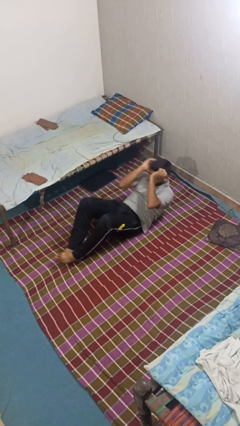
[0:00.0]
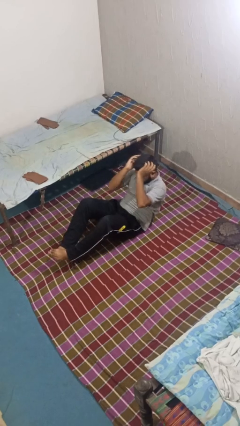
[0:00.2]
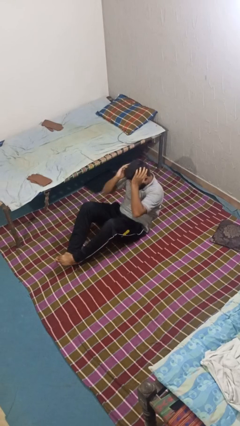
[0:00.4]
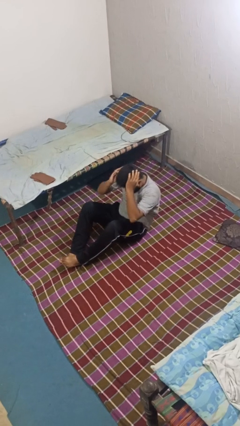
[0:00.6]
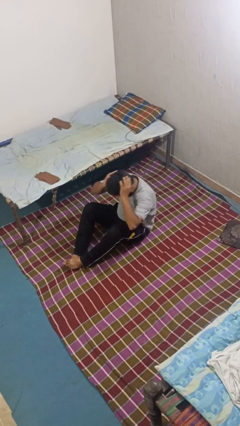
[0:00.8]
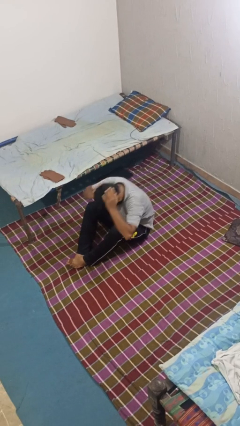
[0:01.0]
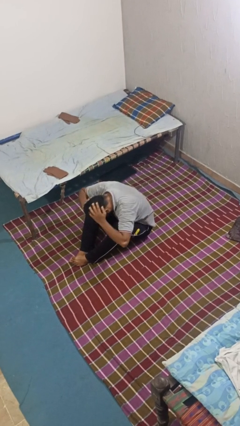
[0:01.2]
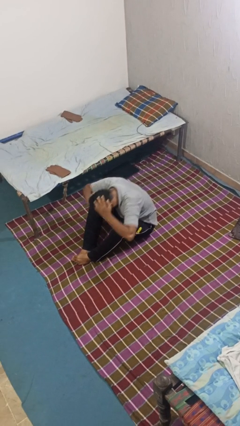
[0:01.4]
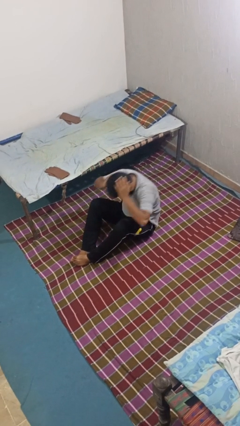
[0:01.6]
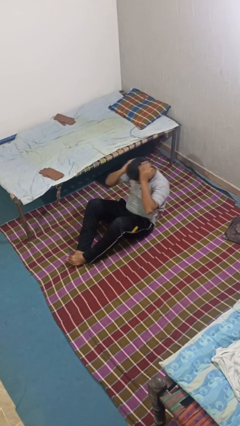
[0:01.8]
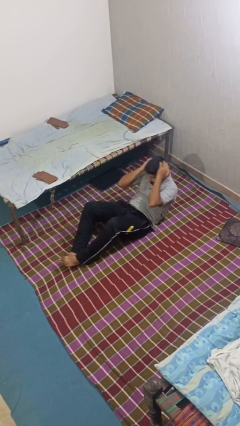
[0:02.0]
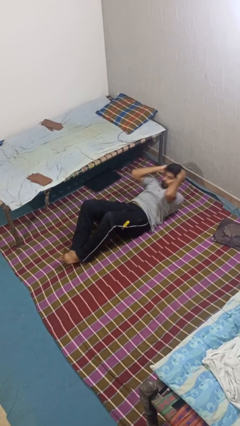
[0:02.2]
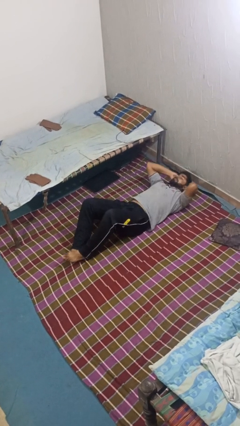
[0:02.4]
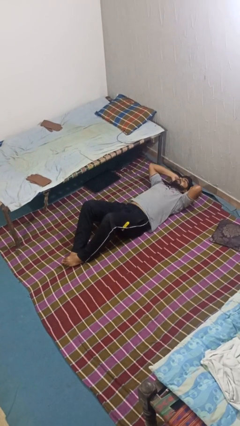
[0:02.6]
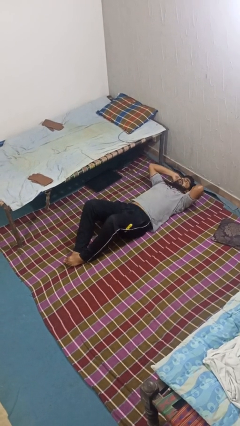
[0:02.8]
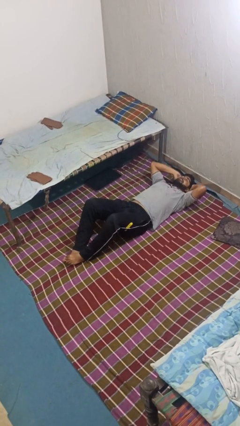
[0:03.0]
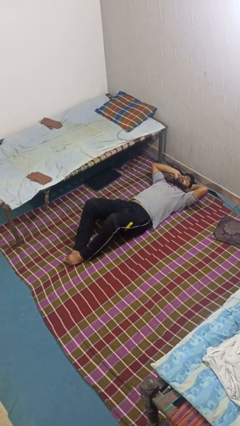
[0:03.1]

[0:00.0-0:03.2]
person exercises with situp

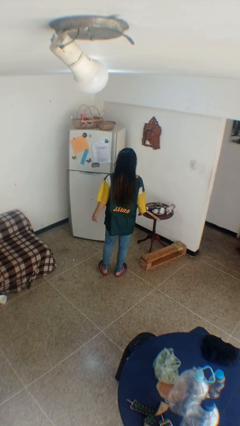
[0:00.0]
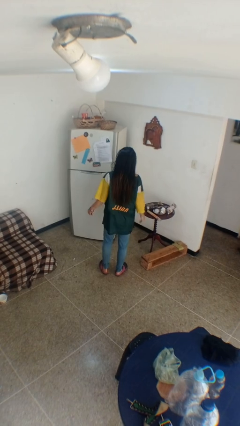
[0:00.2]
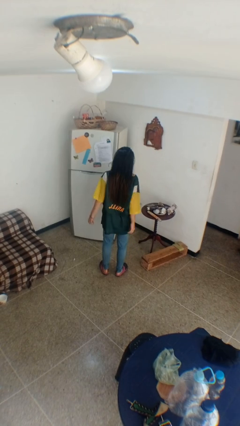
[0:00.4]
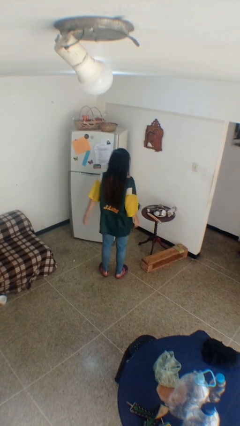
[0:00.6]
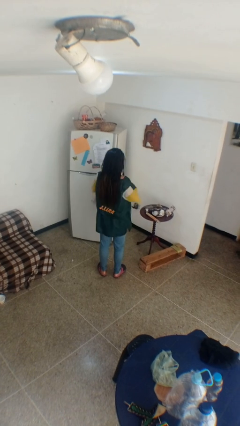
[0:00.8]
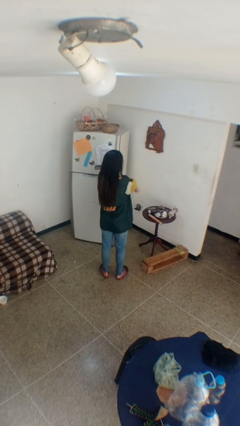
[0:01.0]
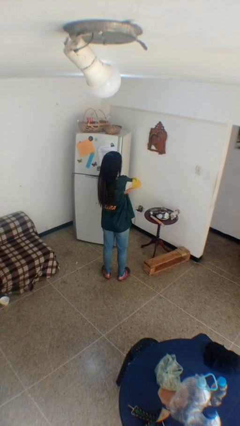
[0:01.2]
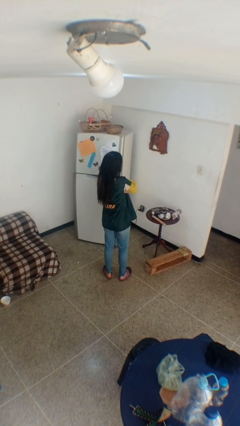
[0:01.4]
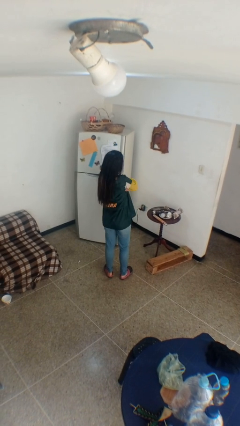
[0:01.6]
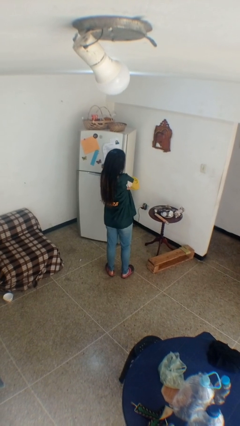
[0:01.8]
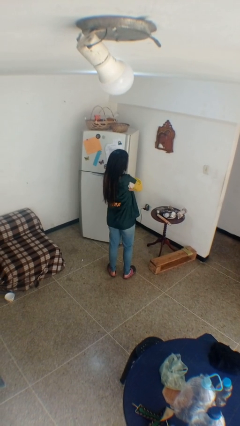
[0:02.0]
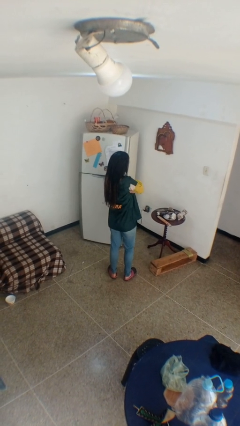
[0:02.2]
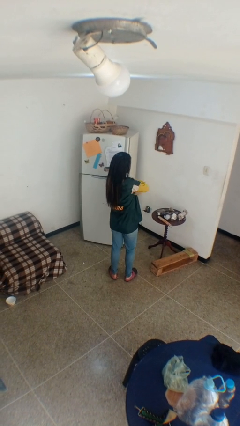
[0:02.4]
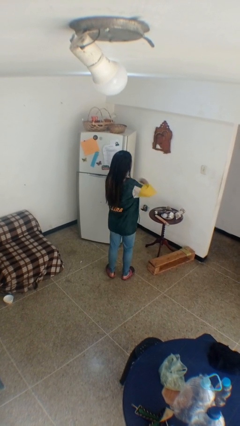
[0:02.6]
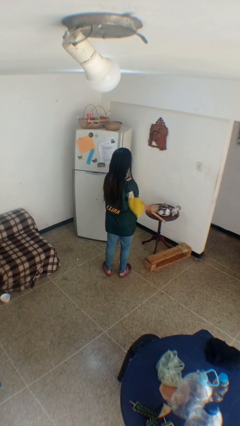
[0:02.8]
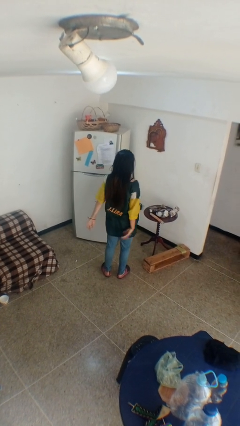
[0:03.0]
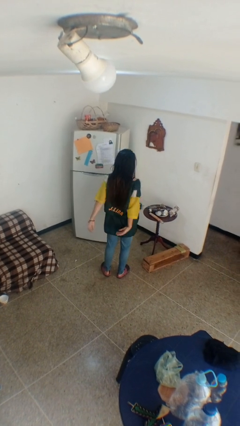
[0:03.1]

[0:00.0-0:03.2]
person gestures arms x

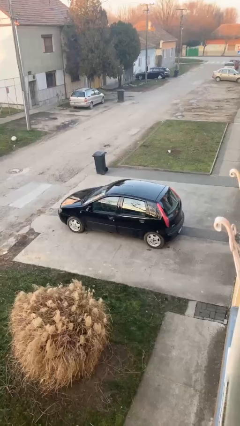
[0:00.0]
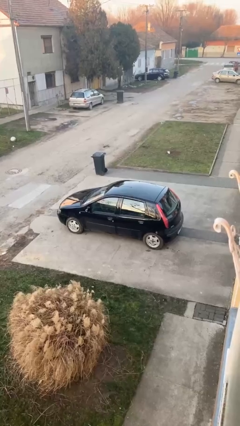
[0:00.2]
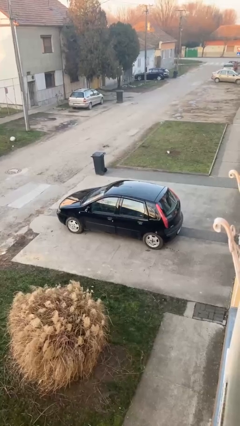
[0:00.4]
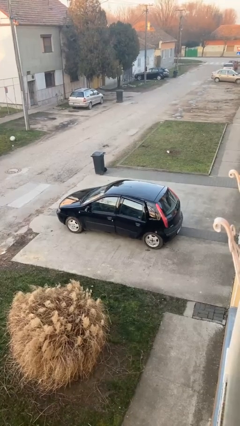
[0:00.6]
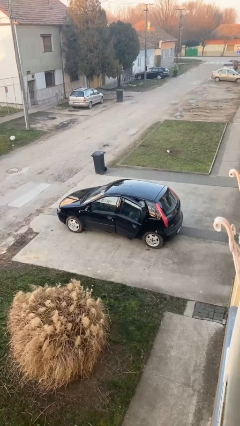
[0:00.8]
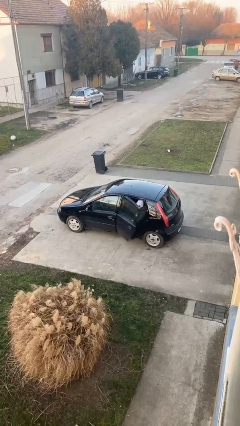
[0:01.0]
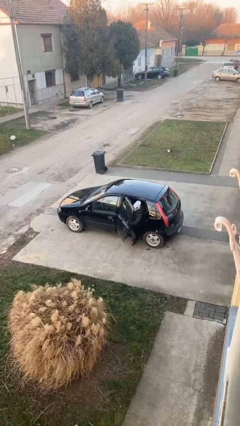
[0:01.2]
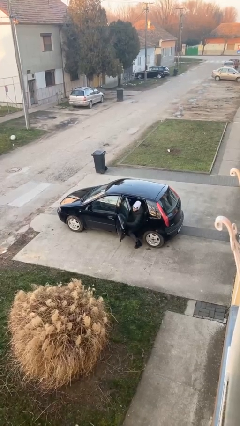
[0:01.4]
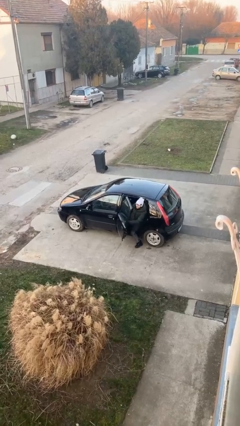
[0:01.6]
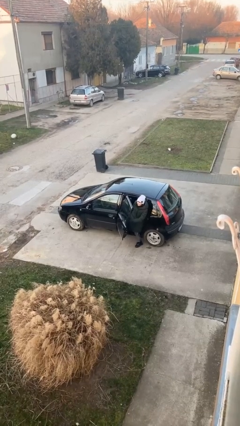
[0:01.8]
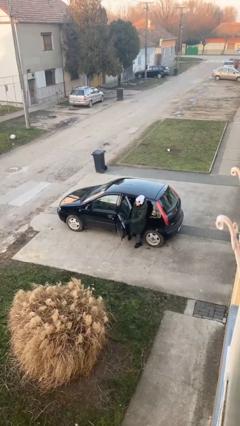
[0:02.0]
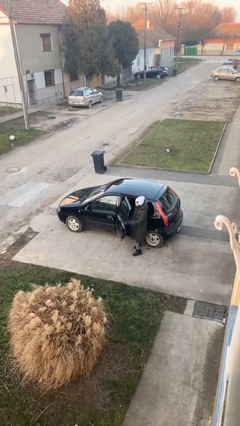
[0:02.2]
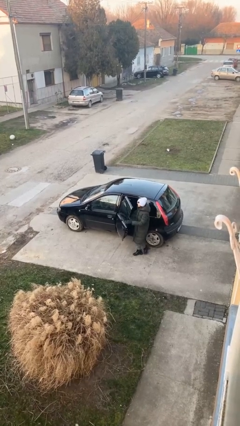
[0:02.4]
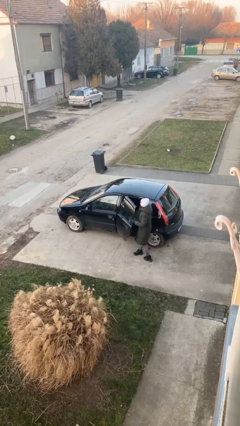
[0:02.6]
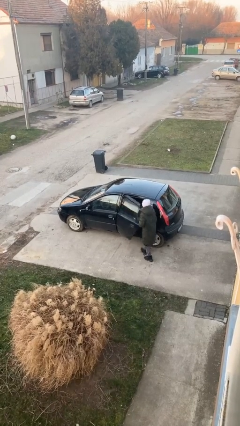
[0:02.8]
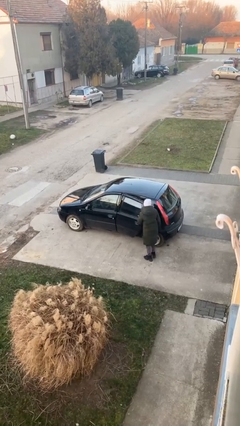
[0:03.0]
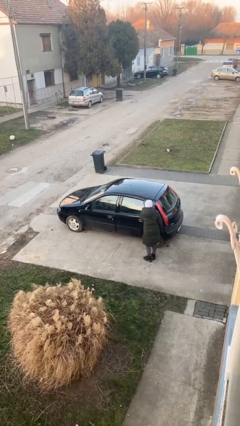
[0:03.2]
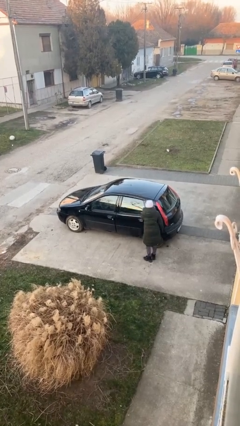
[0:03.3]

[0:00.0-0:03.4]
car drops off person

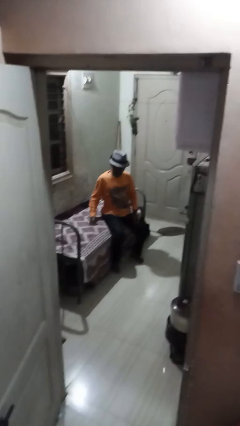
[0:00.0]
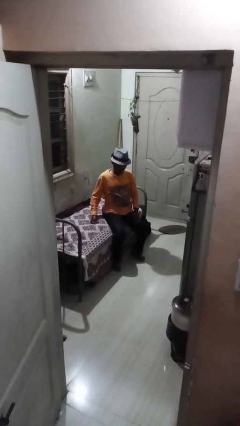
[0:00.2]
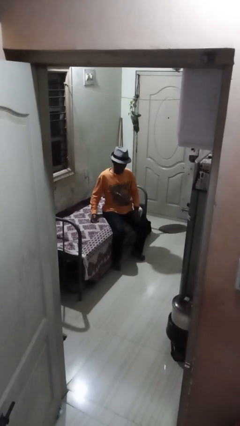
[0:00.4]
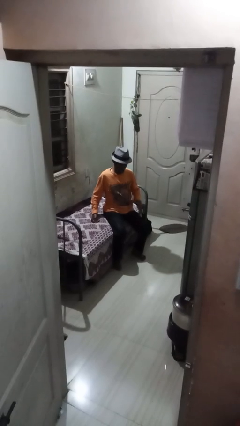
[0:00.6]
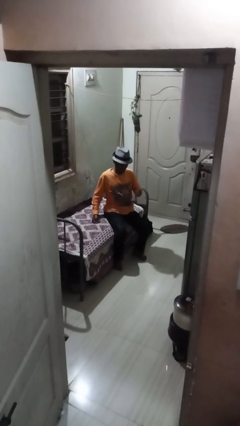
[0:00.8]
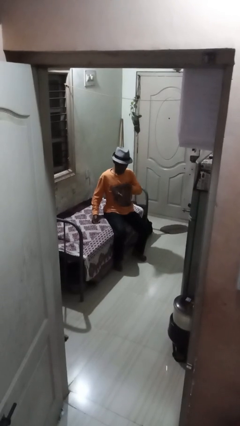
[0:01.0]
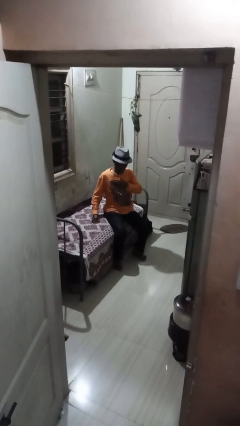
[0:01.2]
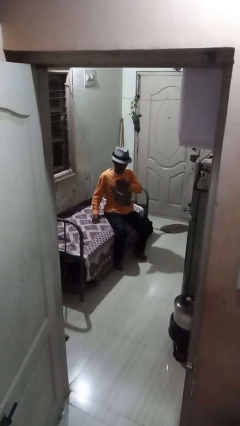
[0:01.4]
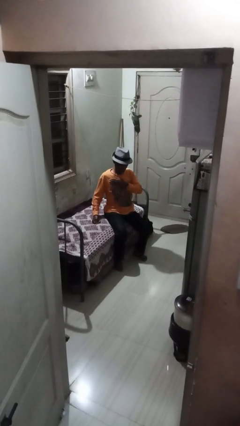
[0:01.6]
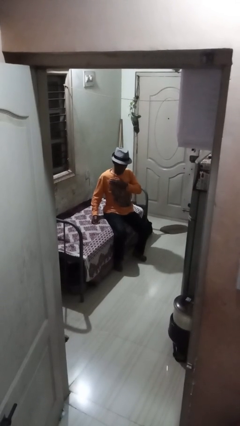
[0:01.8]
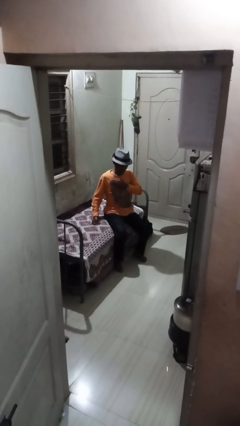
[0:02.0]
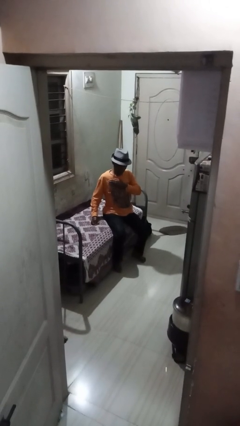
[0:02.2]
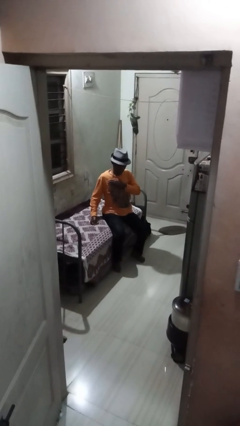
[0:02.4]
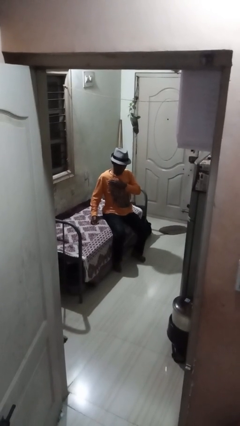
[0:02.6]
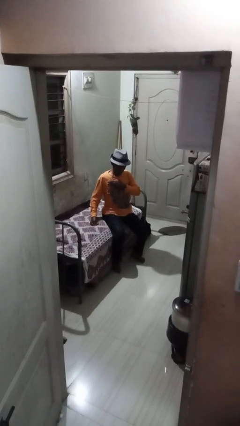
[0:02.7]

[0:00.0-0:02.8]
person drums on chest

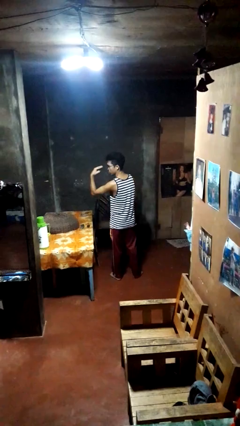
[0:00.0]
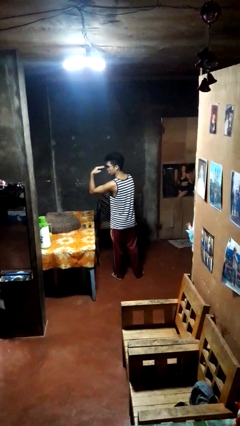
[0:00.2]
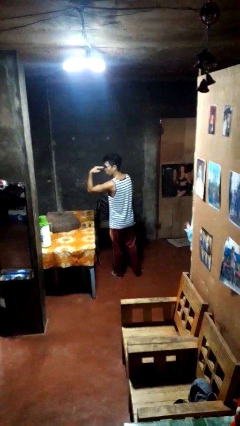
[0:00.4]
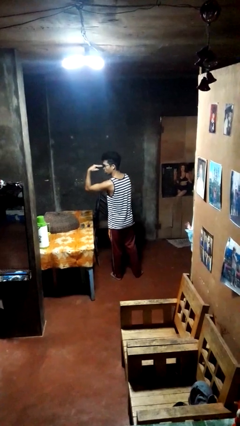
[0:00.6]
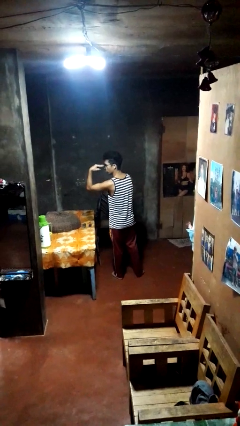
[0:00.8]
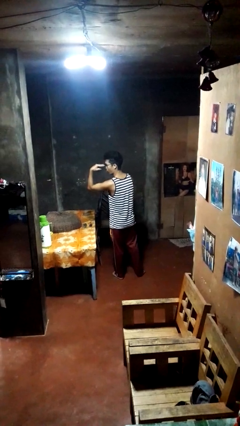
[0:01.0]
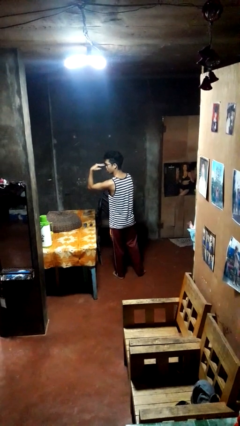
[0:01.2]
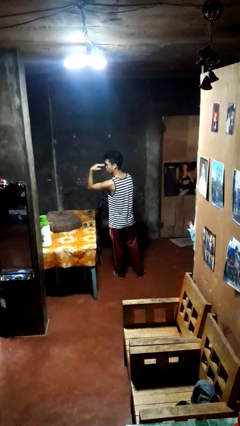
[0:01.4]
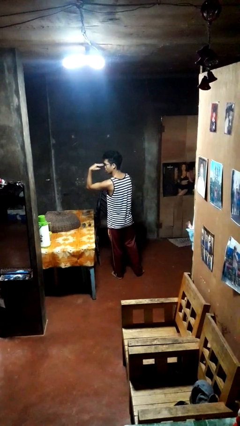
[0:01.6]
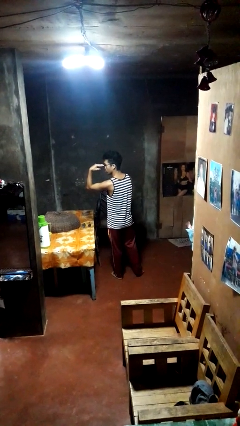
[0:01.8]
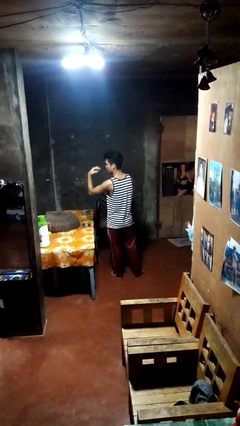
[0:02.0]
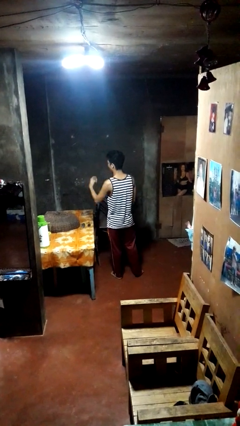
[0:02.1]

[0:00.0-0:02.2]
person gestures watch closely

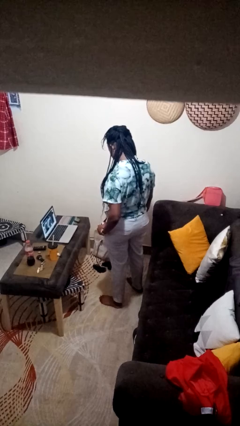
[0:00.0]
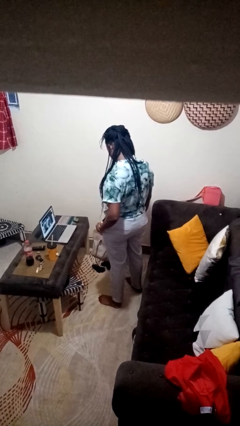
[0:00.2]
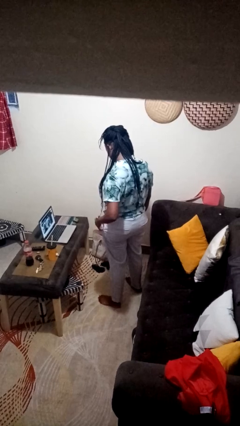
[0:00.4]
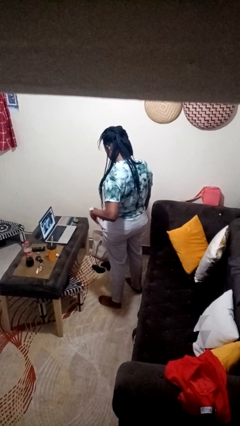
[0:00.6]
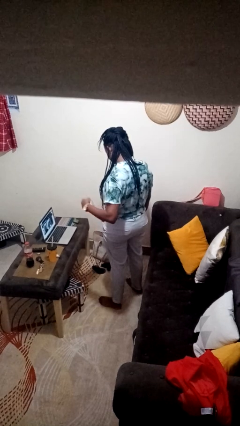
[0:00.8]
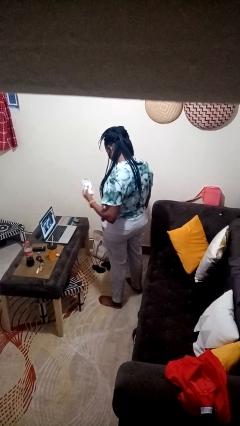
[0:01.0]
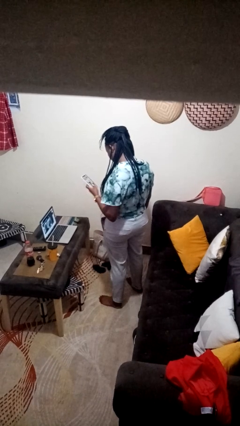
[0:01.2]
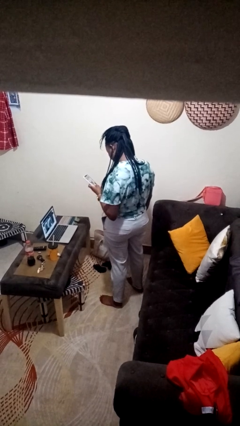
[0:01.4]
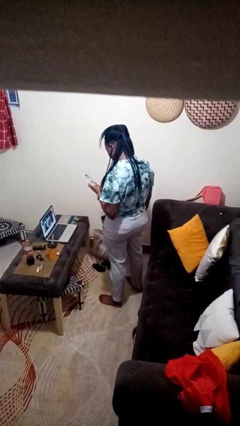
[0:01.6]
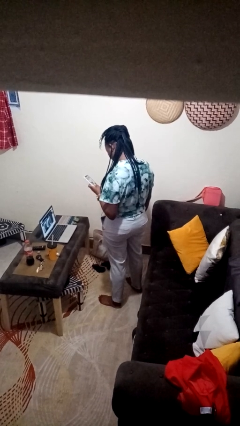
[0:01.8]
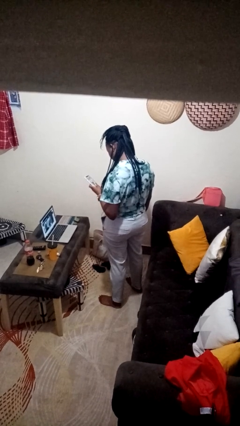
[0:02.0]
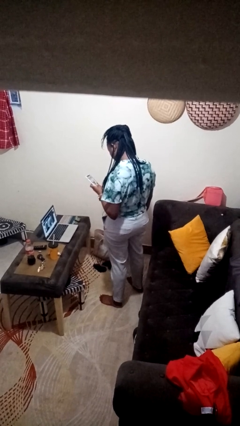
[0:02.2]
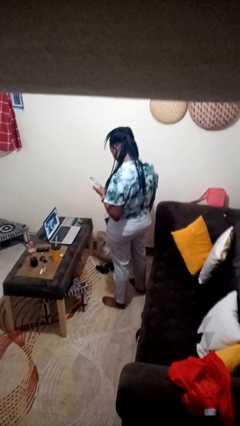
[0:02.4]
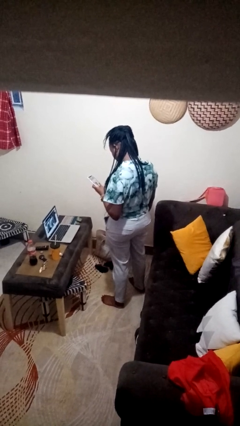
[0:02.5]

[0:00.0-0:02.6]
person takes phone from pocket

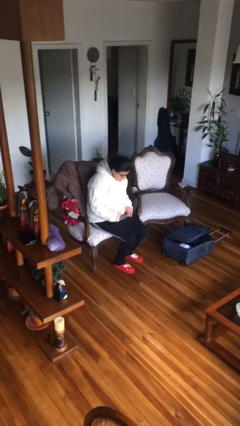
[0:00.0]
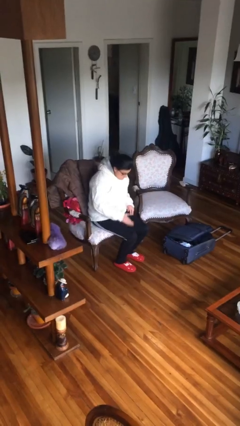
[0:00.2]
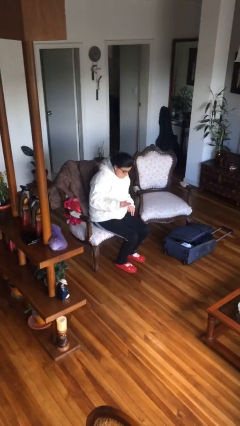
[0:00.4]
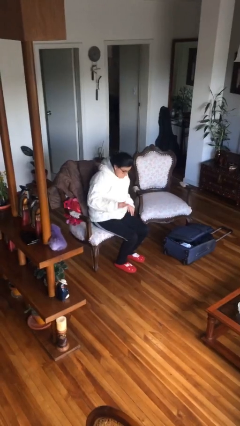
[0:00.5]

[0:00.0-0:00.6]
person swats bug
